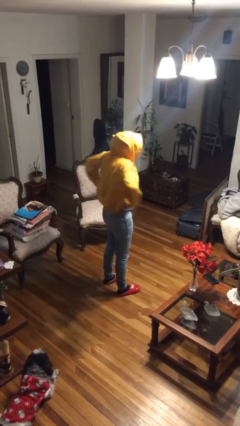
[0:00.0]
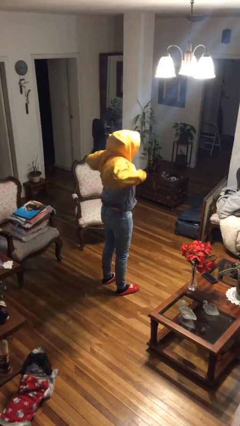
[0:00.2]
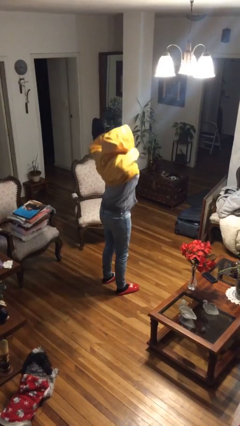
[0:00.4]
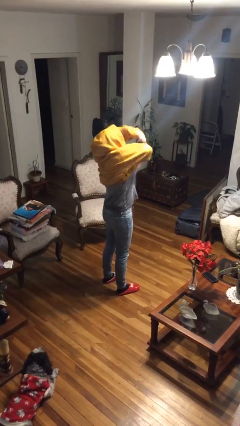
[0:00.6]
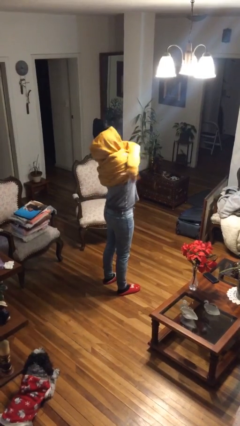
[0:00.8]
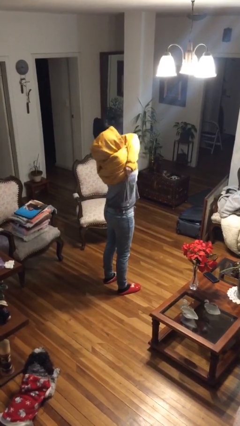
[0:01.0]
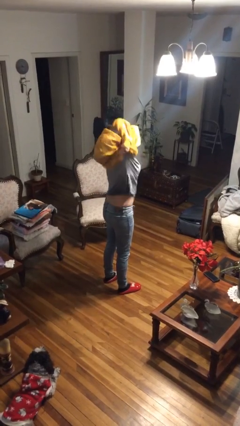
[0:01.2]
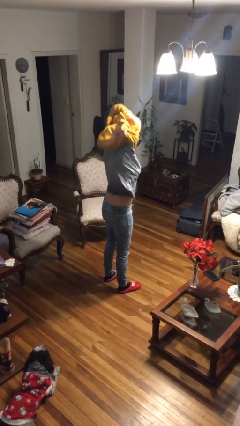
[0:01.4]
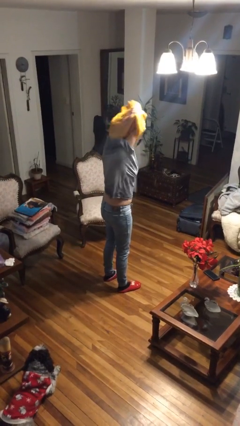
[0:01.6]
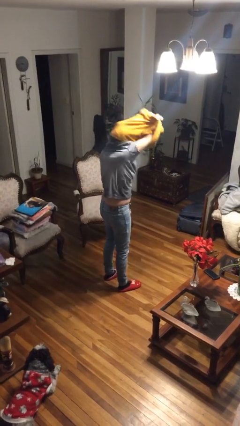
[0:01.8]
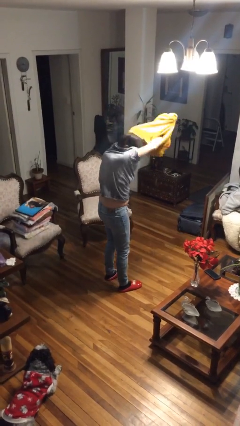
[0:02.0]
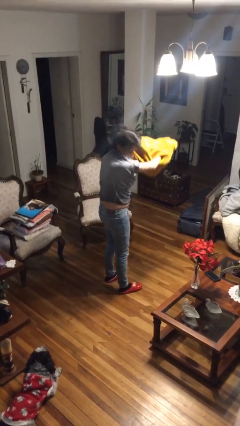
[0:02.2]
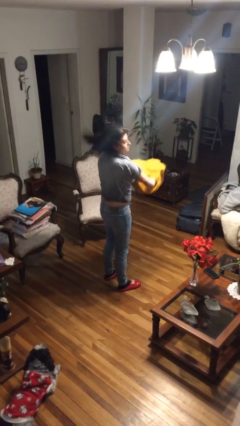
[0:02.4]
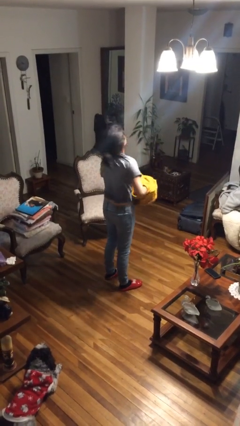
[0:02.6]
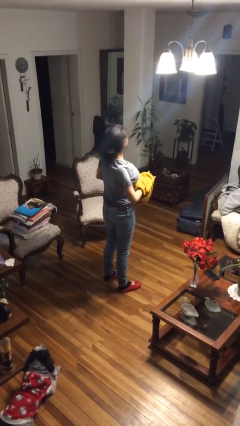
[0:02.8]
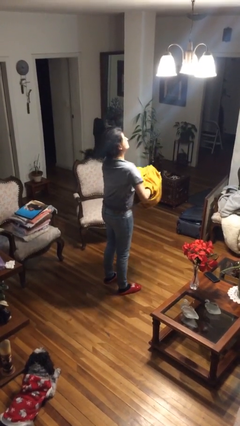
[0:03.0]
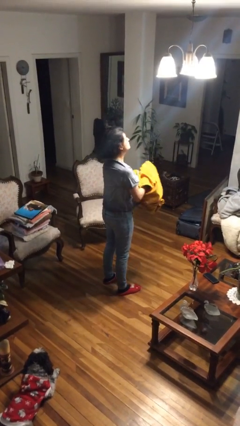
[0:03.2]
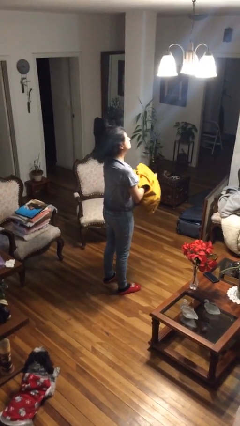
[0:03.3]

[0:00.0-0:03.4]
person takes off hoodie

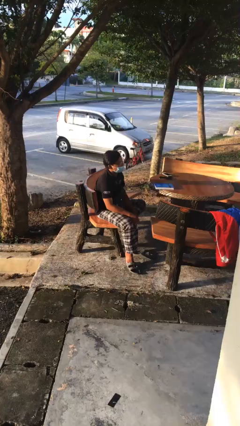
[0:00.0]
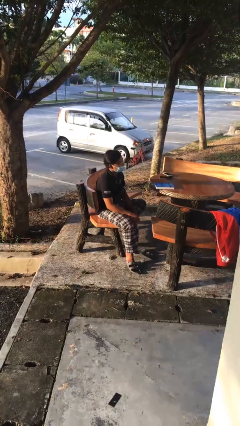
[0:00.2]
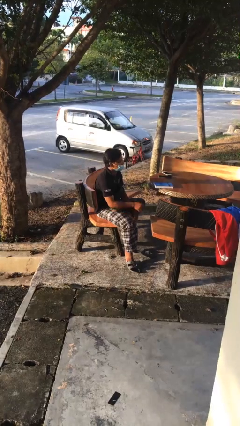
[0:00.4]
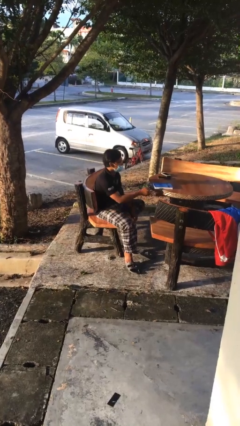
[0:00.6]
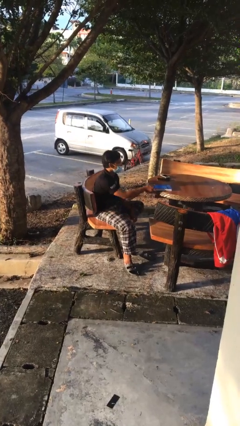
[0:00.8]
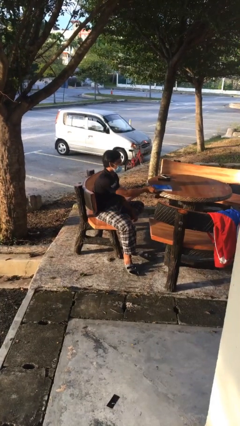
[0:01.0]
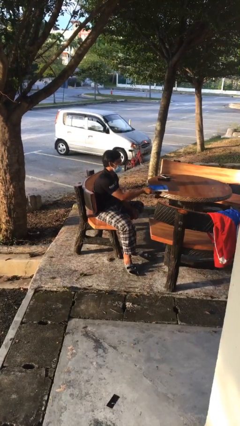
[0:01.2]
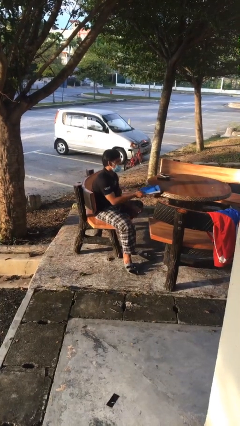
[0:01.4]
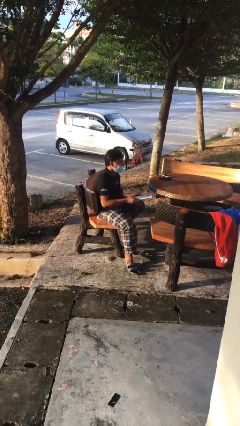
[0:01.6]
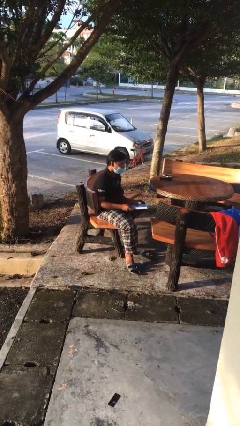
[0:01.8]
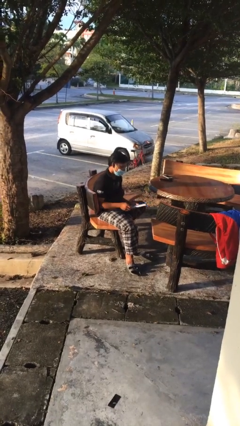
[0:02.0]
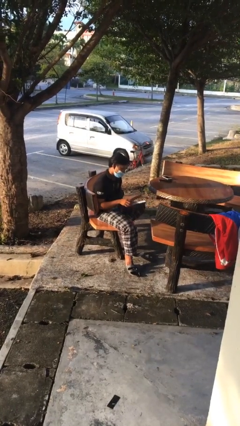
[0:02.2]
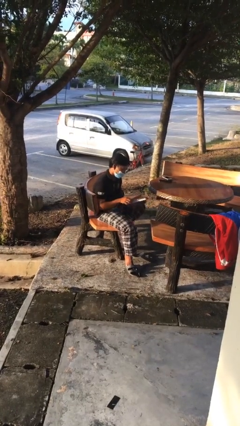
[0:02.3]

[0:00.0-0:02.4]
person picks up object from table

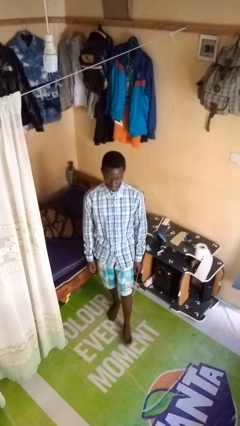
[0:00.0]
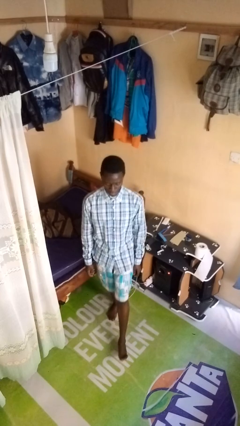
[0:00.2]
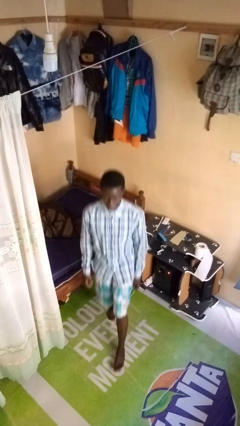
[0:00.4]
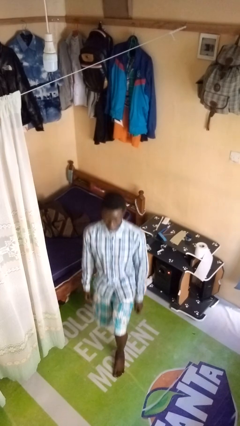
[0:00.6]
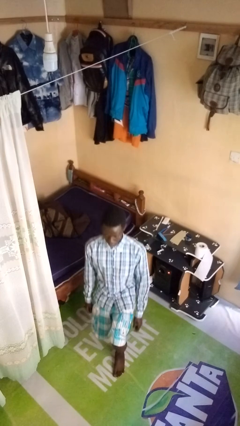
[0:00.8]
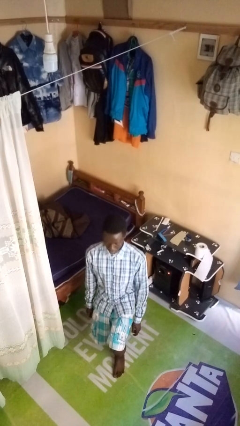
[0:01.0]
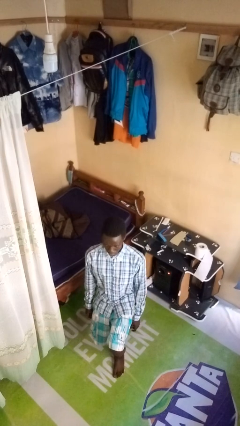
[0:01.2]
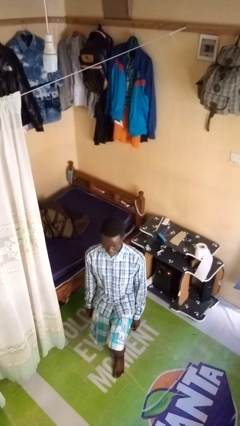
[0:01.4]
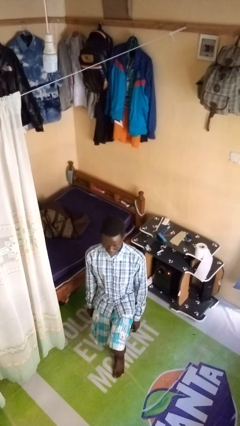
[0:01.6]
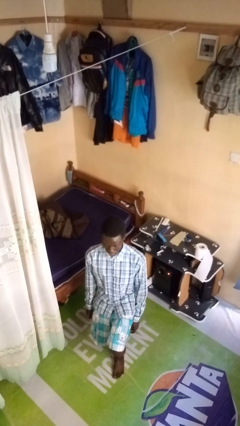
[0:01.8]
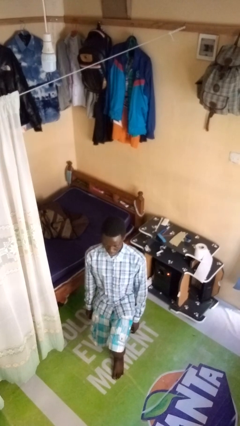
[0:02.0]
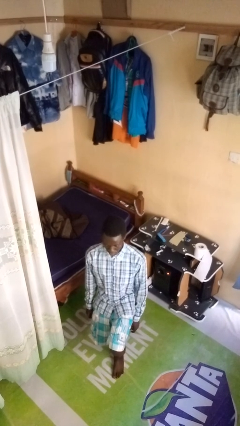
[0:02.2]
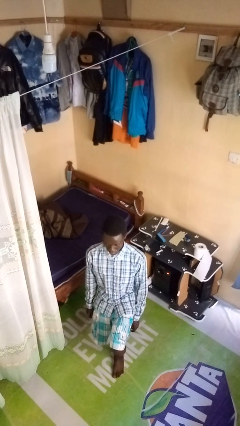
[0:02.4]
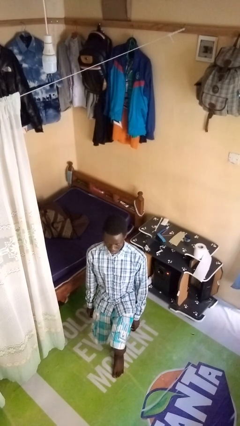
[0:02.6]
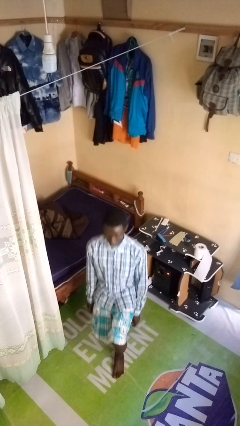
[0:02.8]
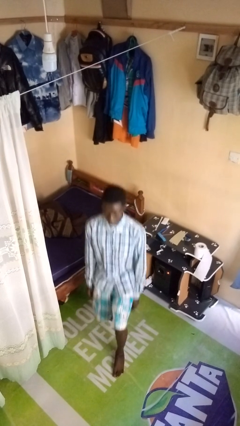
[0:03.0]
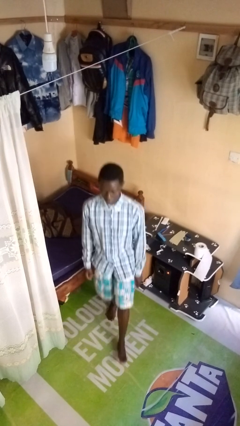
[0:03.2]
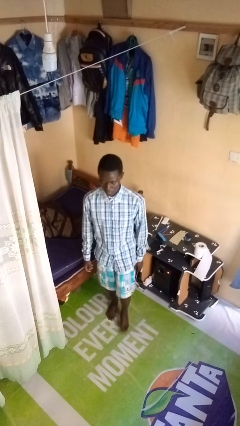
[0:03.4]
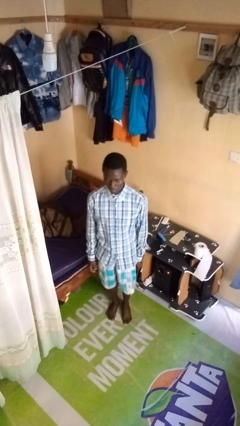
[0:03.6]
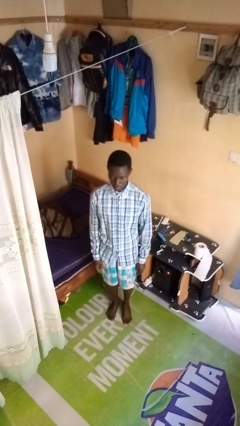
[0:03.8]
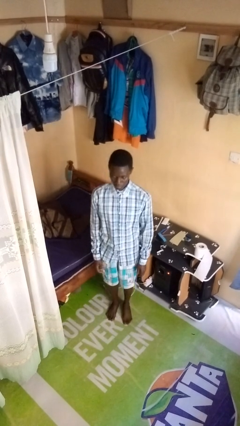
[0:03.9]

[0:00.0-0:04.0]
person exercises with lunges

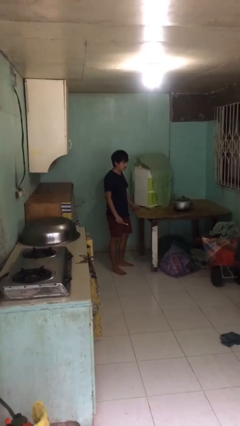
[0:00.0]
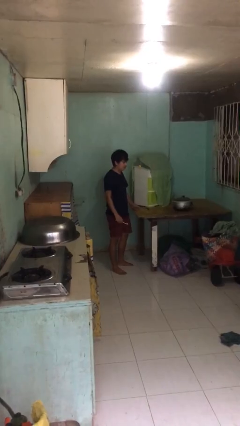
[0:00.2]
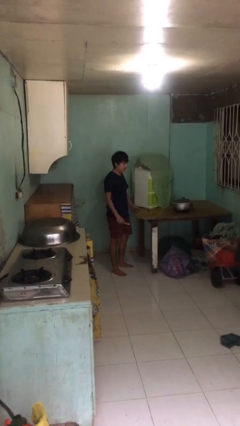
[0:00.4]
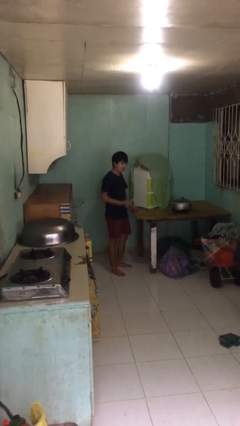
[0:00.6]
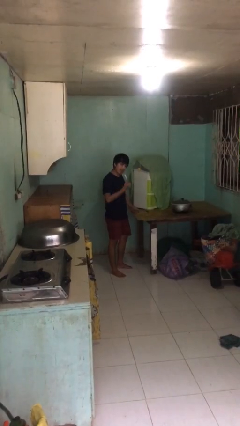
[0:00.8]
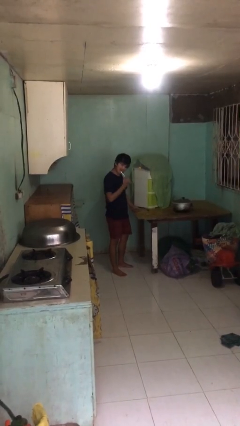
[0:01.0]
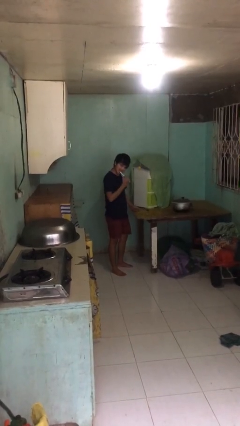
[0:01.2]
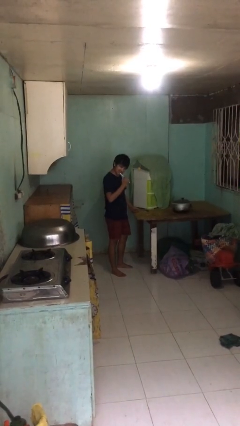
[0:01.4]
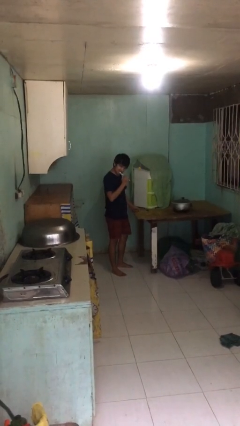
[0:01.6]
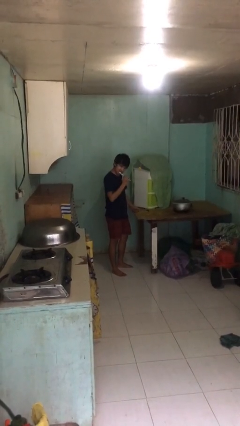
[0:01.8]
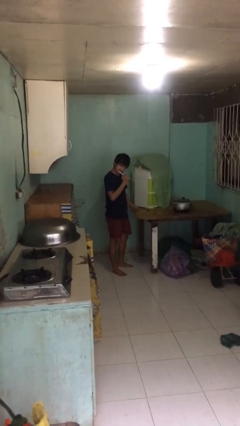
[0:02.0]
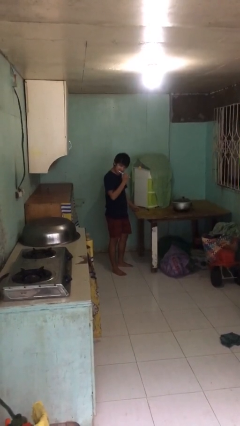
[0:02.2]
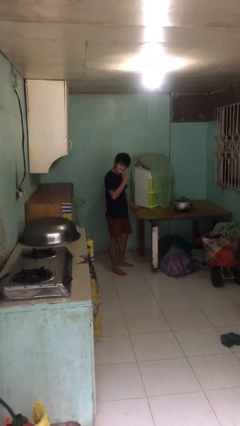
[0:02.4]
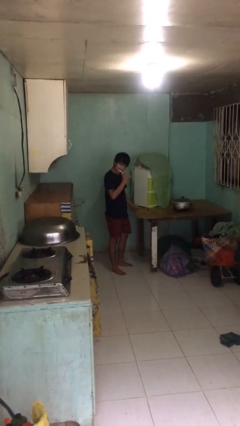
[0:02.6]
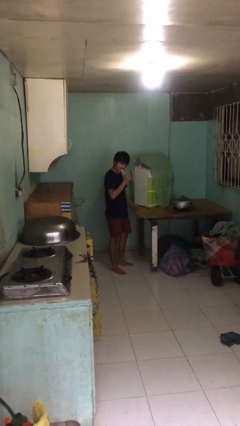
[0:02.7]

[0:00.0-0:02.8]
person brushes teeth

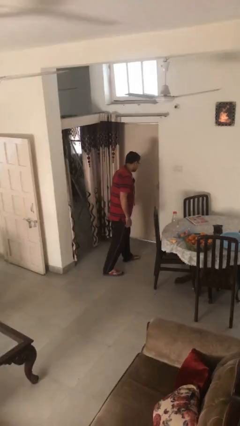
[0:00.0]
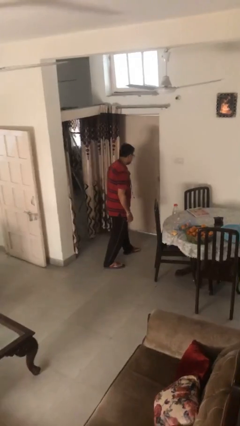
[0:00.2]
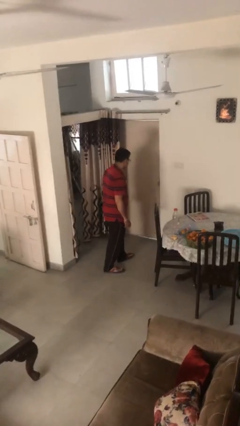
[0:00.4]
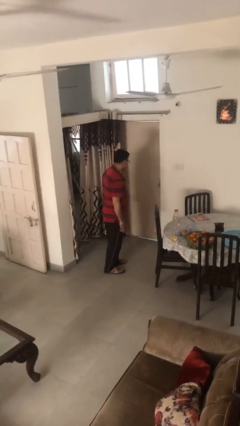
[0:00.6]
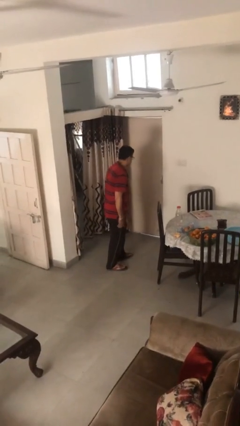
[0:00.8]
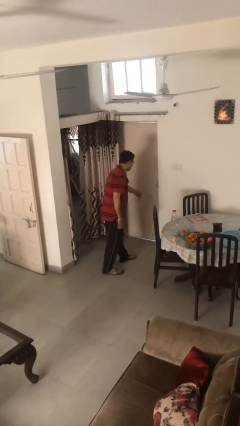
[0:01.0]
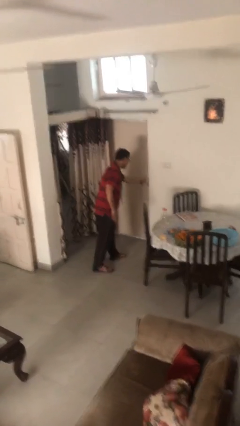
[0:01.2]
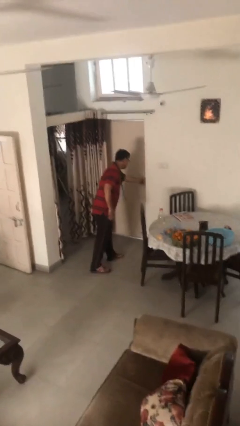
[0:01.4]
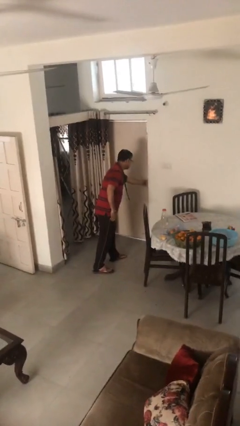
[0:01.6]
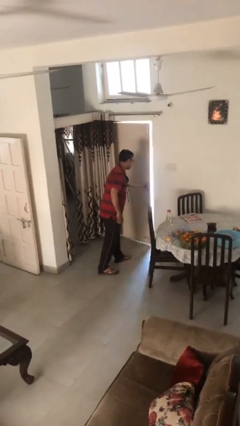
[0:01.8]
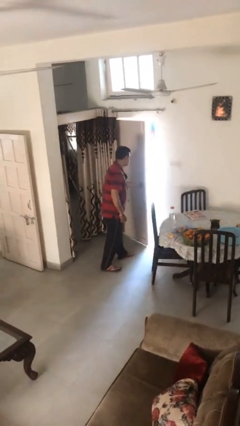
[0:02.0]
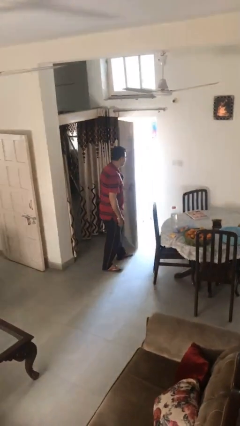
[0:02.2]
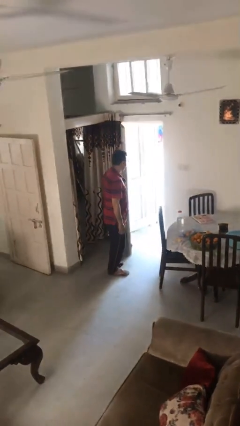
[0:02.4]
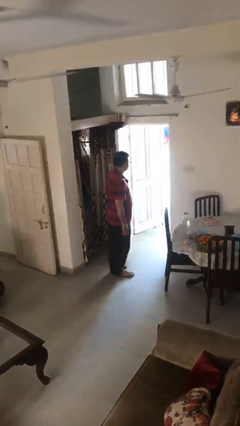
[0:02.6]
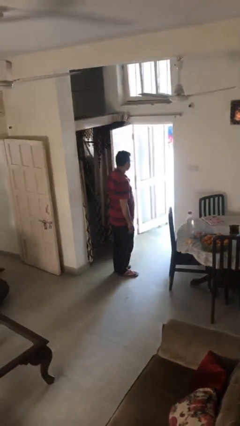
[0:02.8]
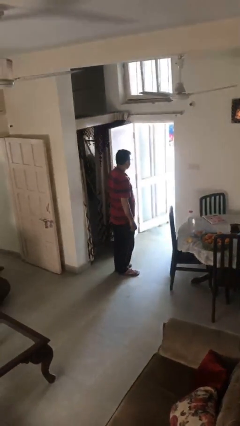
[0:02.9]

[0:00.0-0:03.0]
person opens facility door

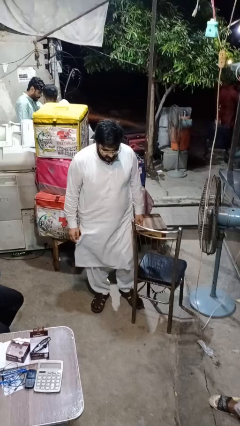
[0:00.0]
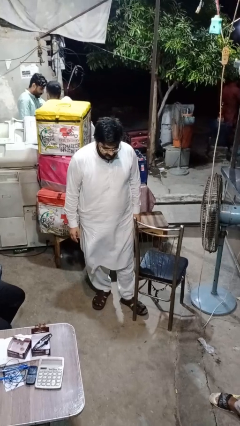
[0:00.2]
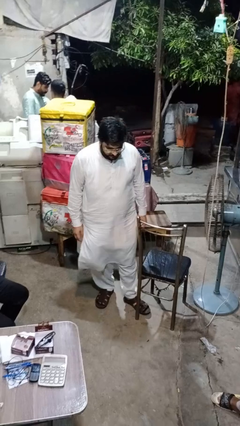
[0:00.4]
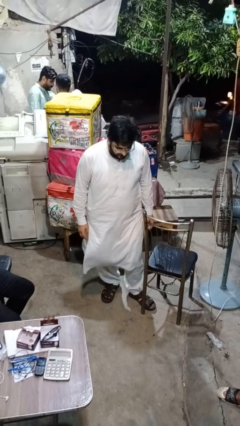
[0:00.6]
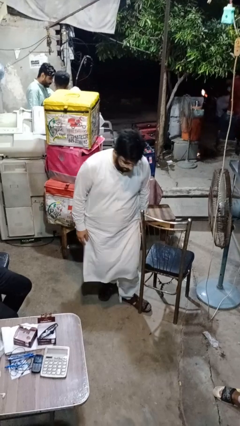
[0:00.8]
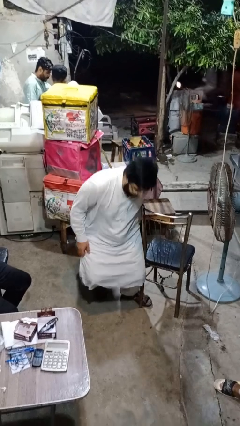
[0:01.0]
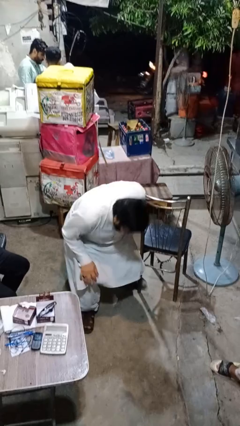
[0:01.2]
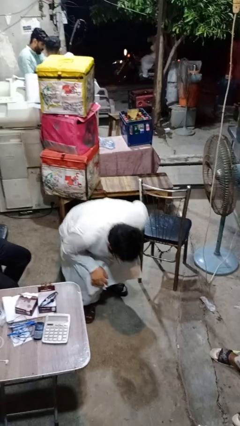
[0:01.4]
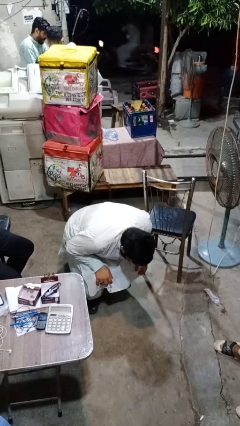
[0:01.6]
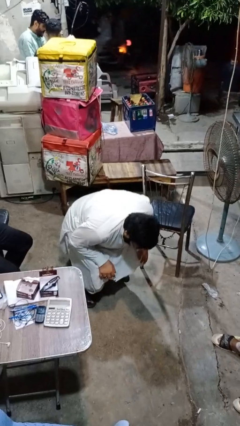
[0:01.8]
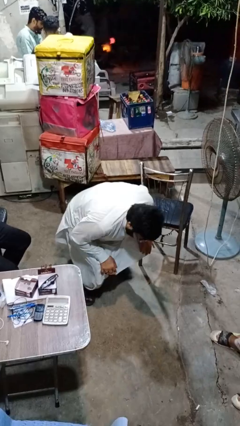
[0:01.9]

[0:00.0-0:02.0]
person lies down on floor
